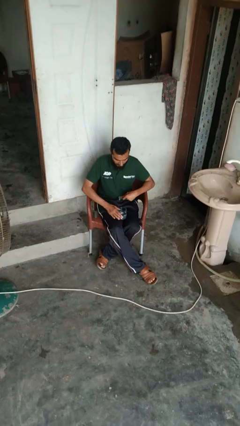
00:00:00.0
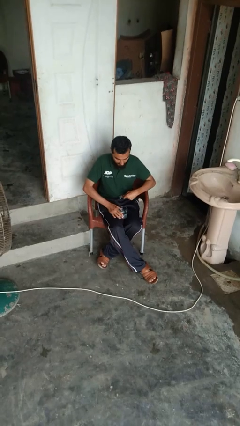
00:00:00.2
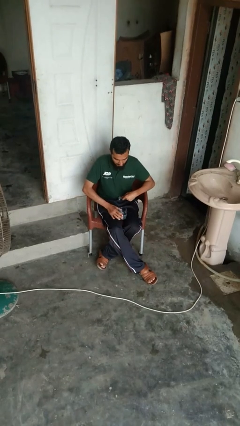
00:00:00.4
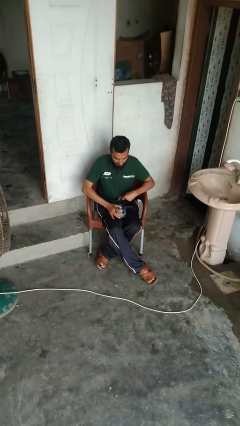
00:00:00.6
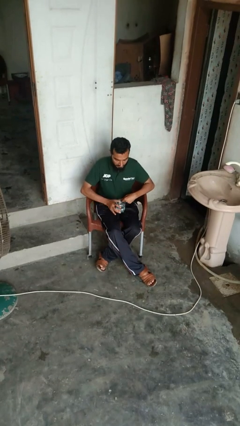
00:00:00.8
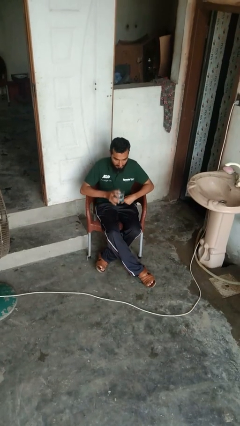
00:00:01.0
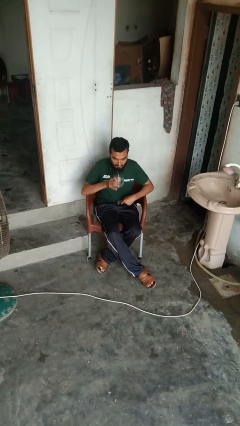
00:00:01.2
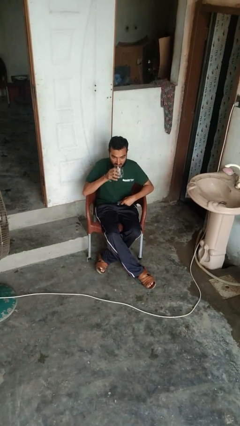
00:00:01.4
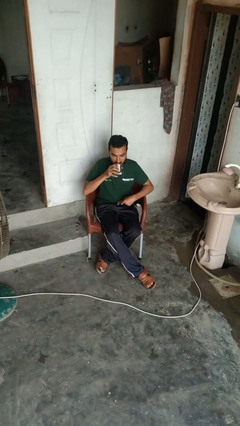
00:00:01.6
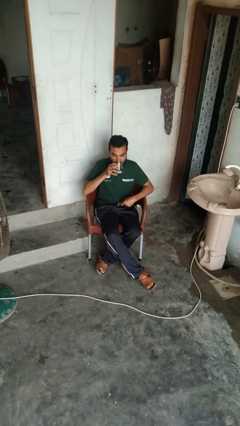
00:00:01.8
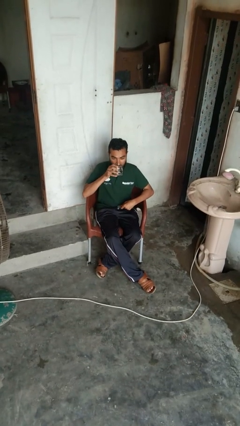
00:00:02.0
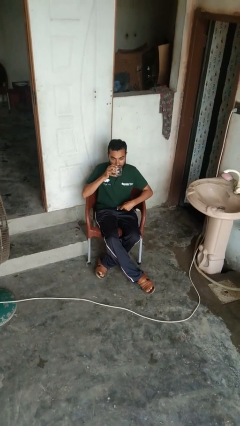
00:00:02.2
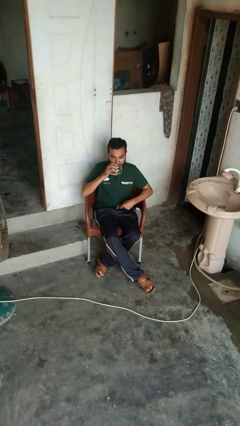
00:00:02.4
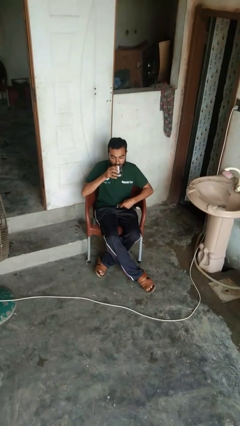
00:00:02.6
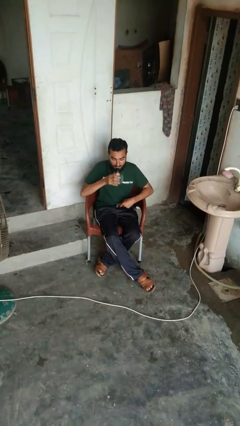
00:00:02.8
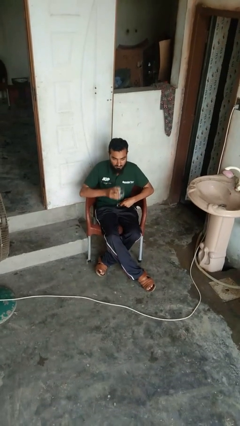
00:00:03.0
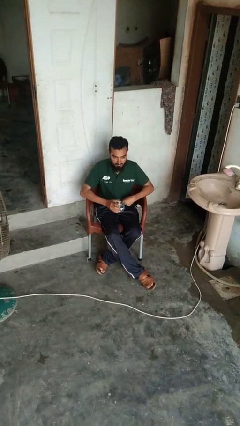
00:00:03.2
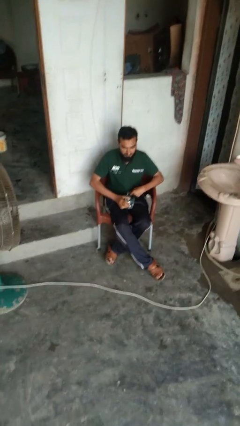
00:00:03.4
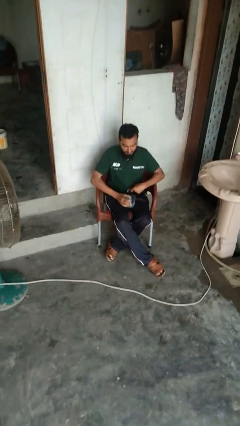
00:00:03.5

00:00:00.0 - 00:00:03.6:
person drinks from cup

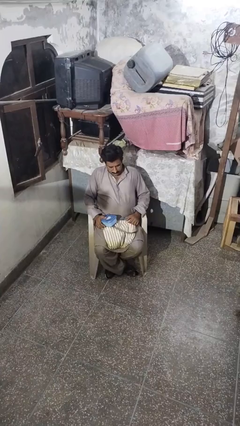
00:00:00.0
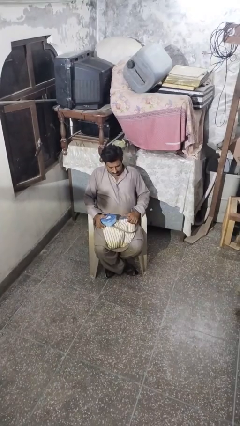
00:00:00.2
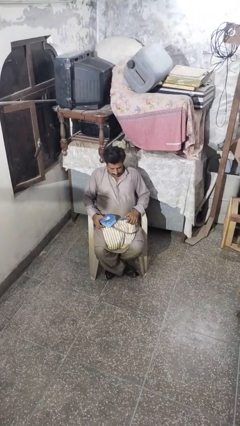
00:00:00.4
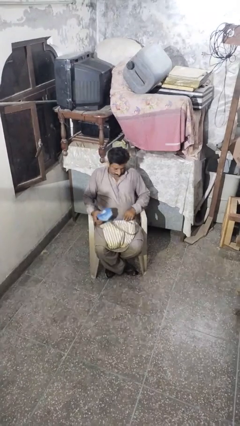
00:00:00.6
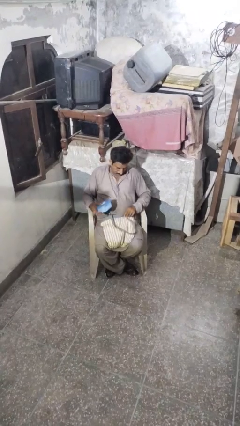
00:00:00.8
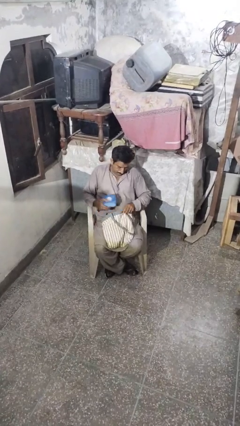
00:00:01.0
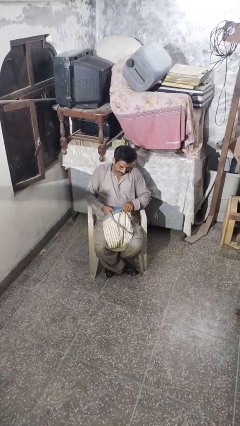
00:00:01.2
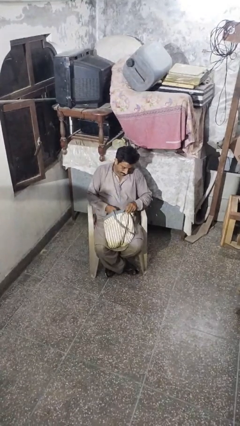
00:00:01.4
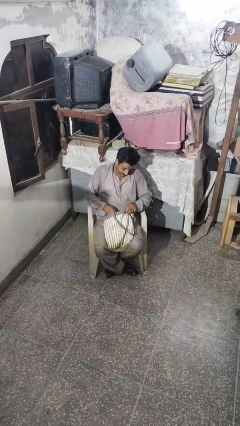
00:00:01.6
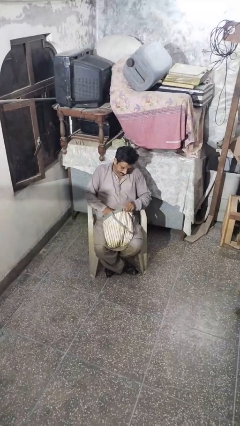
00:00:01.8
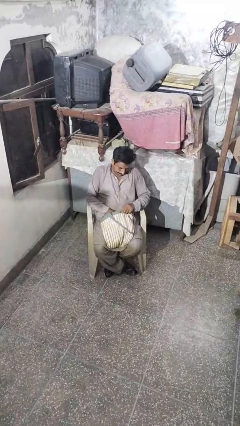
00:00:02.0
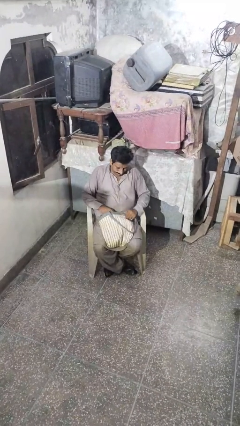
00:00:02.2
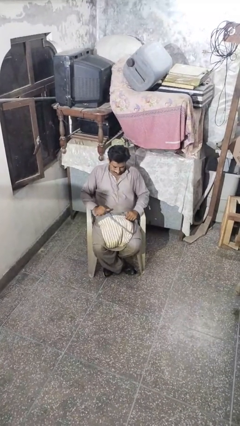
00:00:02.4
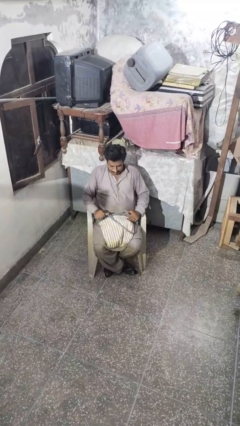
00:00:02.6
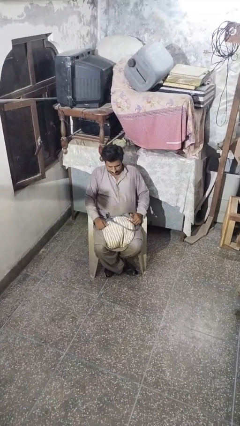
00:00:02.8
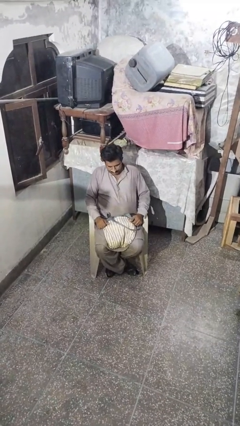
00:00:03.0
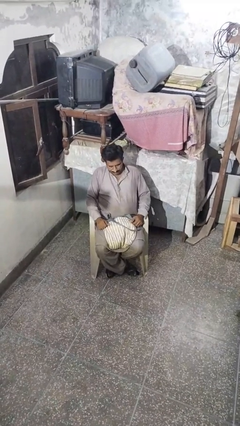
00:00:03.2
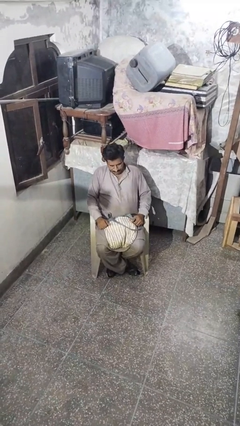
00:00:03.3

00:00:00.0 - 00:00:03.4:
person puts object into backpack

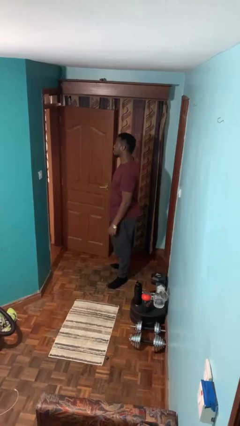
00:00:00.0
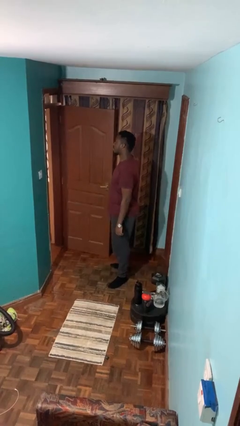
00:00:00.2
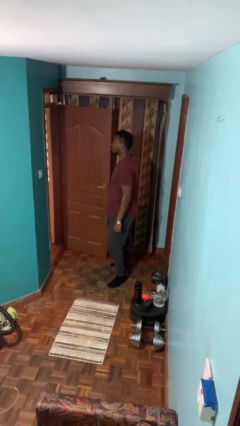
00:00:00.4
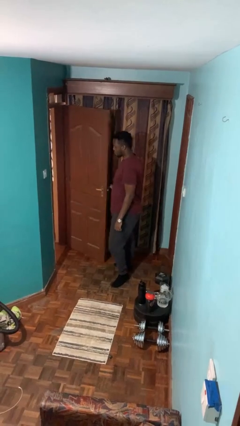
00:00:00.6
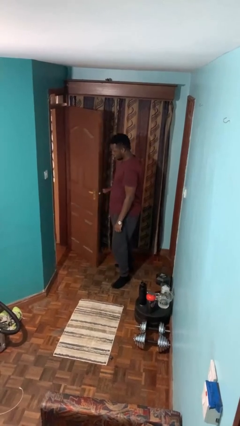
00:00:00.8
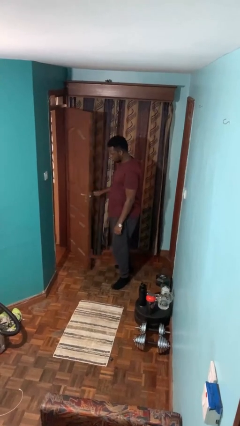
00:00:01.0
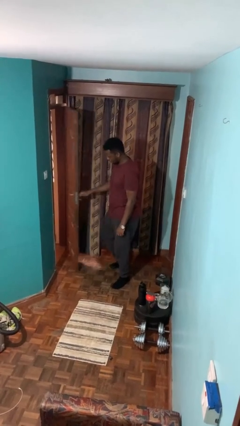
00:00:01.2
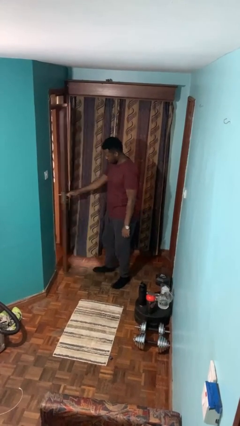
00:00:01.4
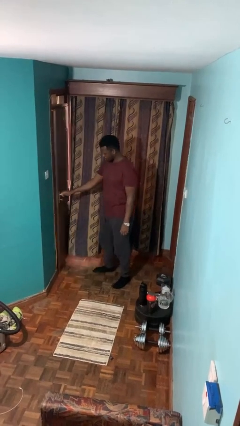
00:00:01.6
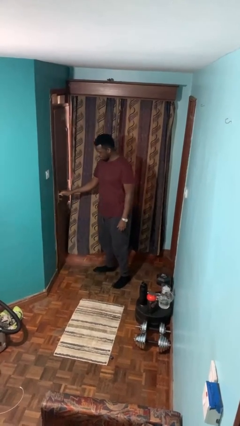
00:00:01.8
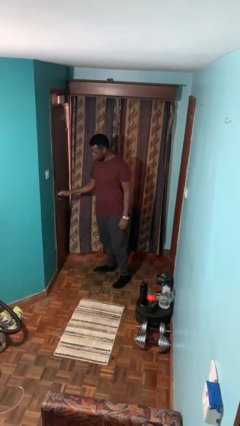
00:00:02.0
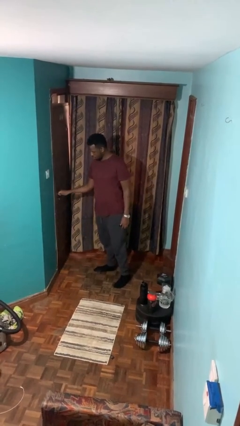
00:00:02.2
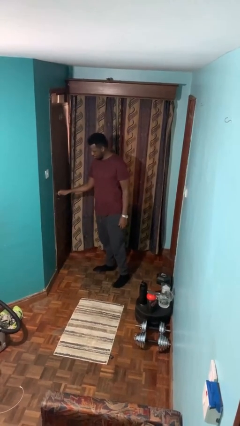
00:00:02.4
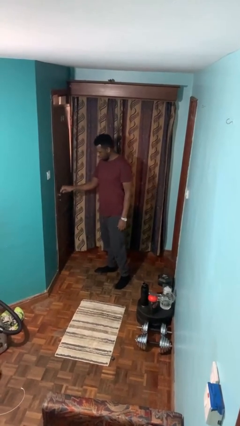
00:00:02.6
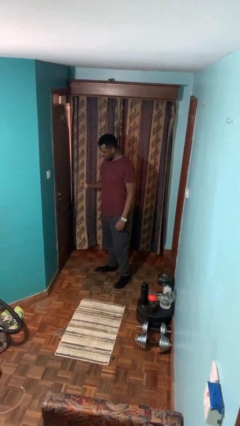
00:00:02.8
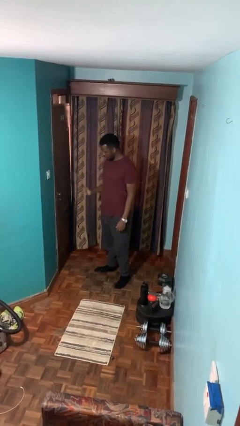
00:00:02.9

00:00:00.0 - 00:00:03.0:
person closes facility door

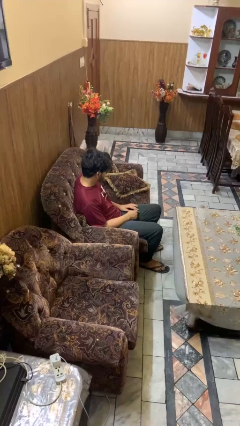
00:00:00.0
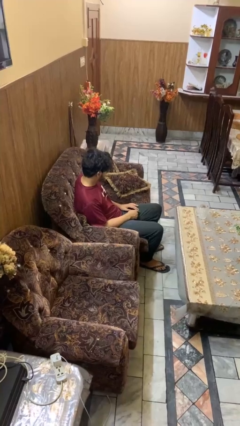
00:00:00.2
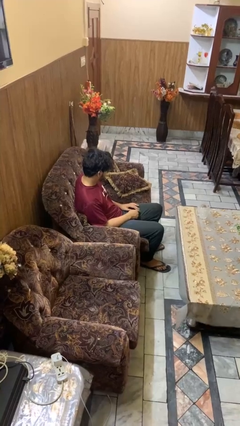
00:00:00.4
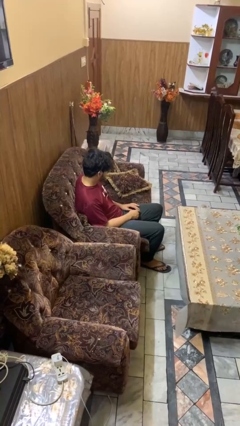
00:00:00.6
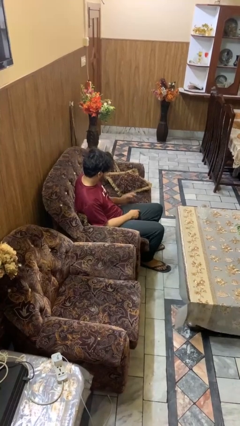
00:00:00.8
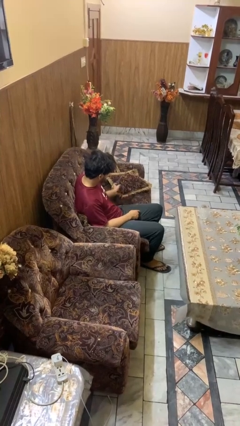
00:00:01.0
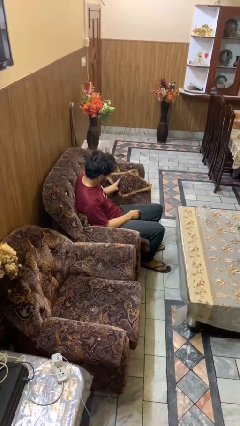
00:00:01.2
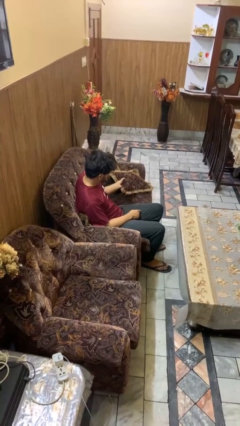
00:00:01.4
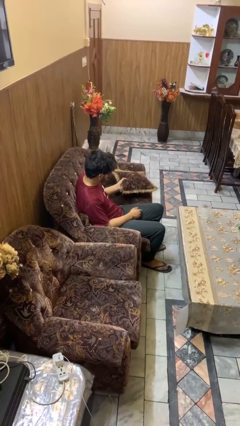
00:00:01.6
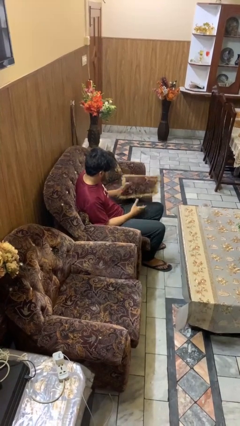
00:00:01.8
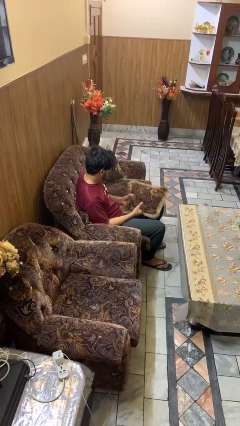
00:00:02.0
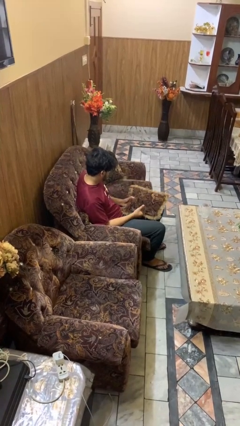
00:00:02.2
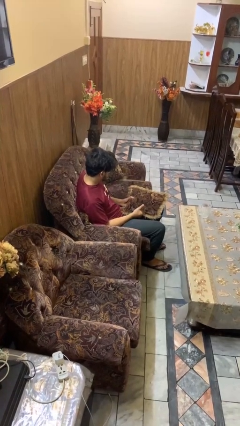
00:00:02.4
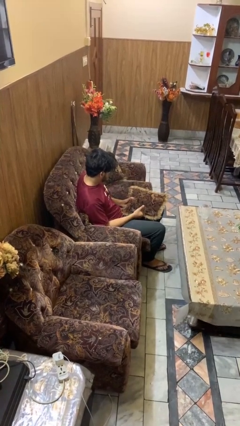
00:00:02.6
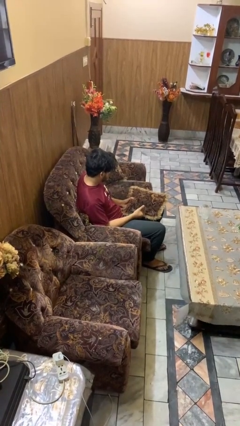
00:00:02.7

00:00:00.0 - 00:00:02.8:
person picks up object from couch

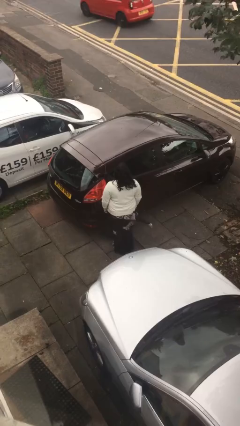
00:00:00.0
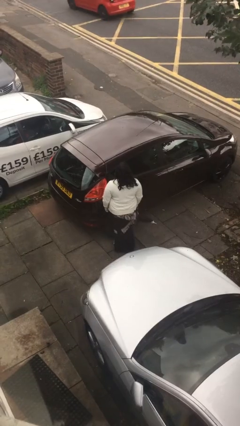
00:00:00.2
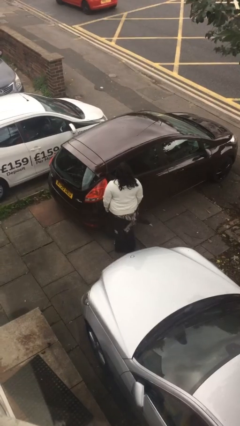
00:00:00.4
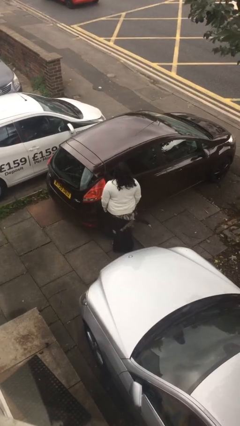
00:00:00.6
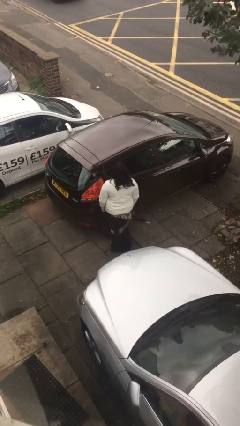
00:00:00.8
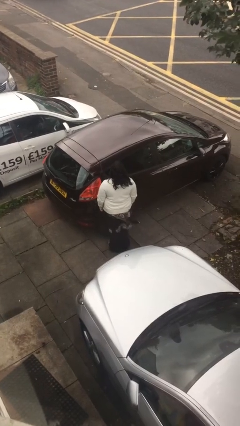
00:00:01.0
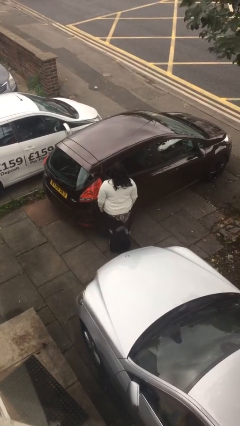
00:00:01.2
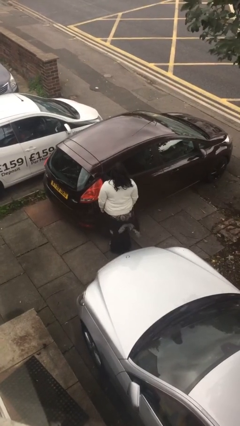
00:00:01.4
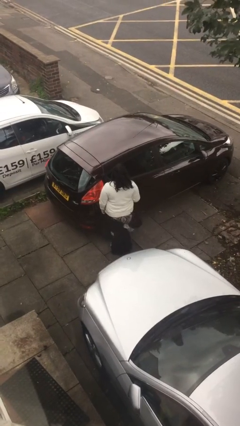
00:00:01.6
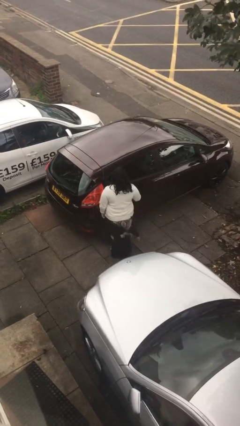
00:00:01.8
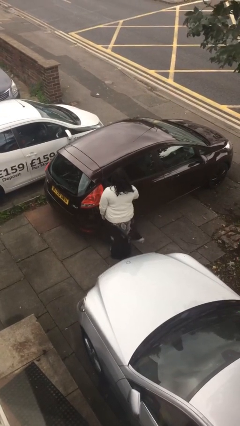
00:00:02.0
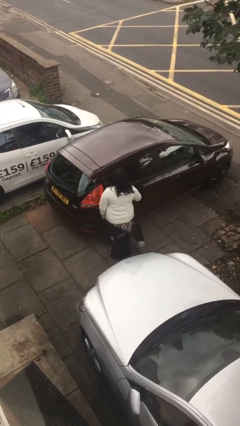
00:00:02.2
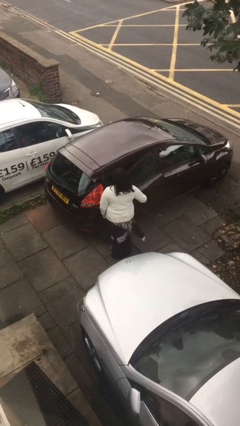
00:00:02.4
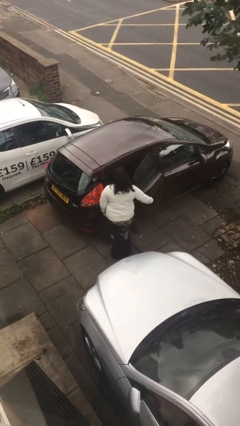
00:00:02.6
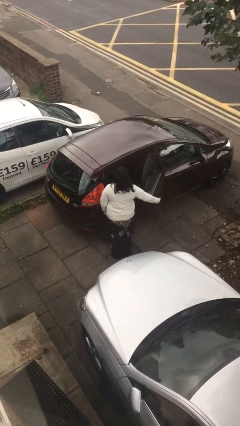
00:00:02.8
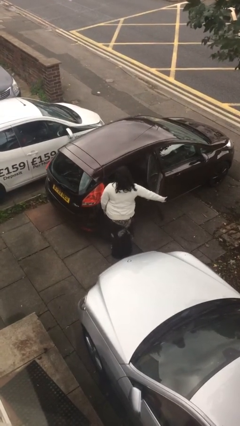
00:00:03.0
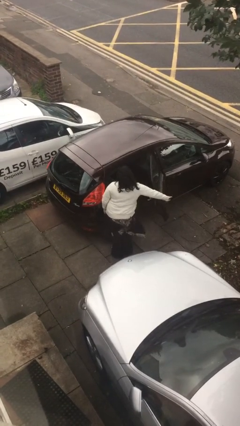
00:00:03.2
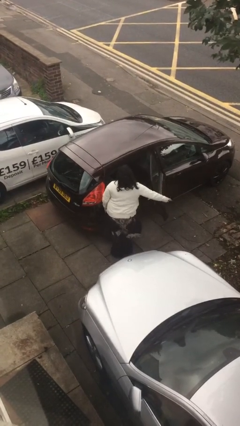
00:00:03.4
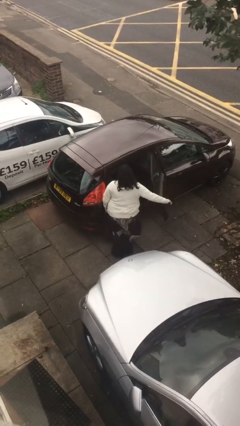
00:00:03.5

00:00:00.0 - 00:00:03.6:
person opens car door

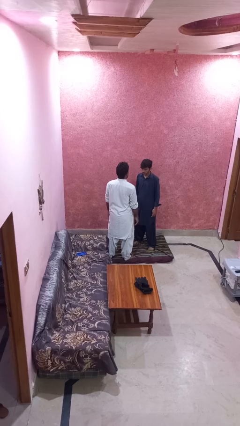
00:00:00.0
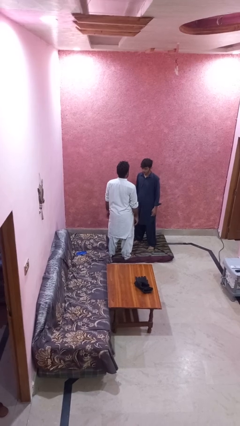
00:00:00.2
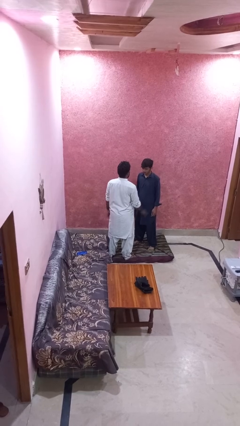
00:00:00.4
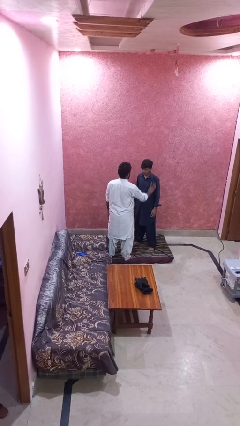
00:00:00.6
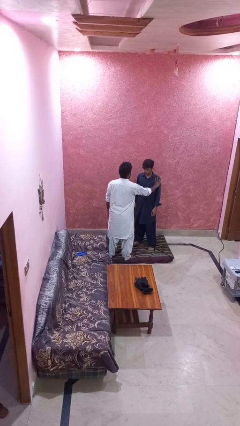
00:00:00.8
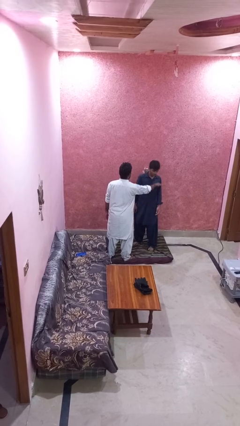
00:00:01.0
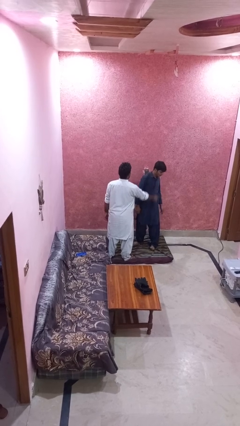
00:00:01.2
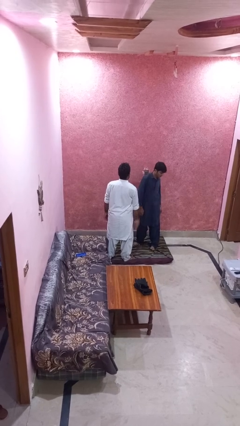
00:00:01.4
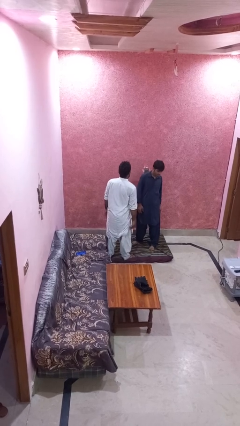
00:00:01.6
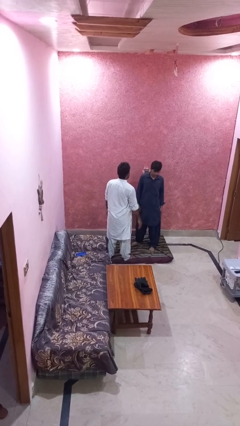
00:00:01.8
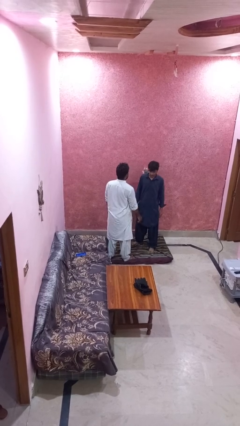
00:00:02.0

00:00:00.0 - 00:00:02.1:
person shoves person
